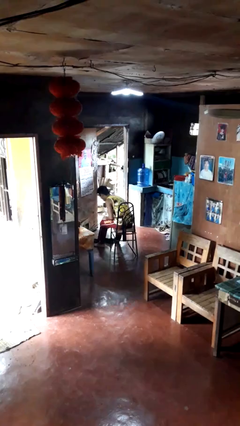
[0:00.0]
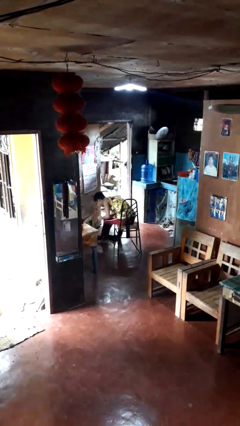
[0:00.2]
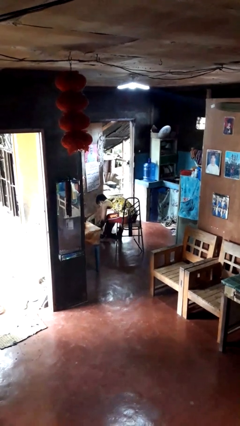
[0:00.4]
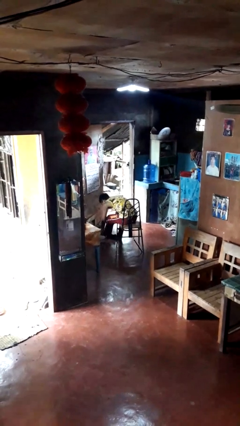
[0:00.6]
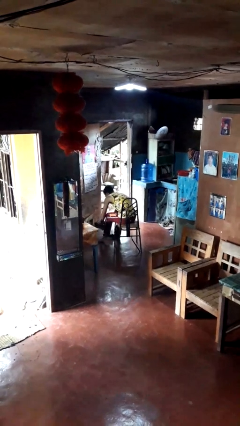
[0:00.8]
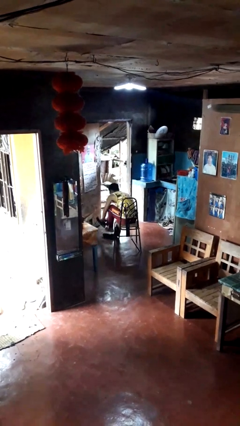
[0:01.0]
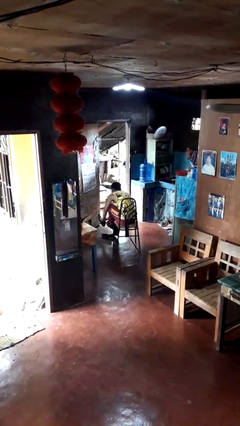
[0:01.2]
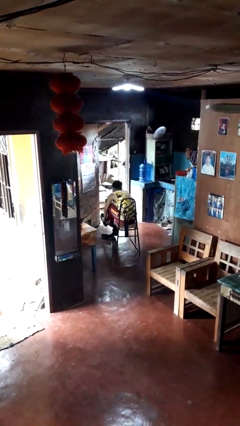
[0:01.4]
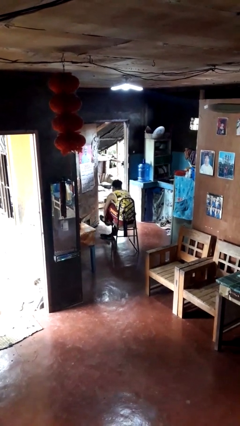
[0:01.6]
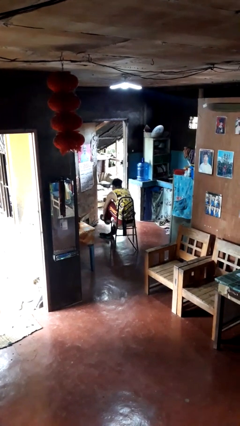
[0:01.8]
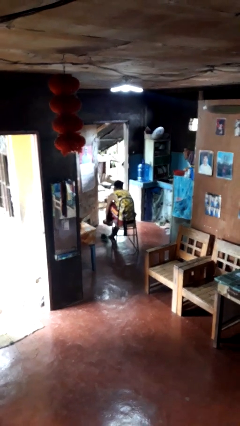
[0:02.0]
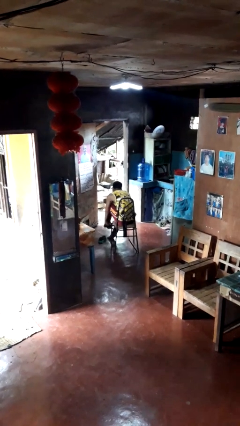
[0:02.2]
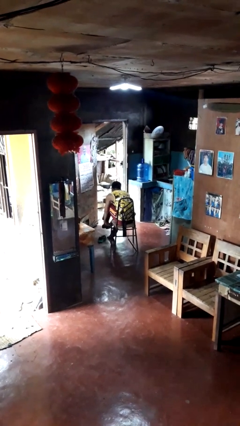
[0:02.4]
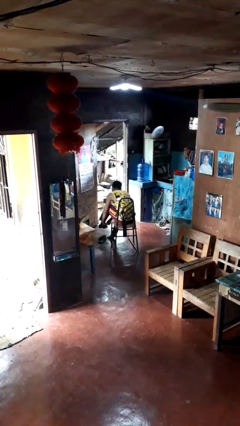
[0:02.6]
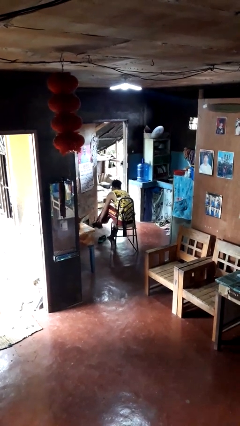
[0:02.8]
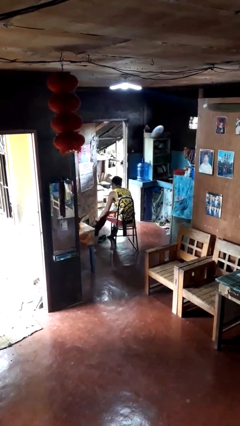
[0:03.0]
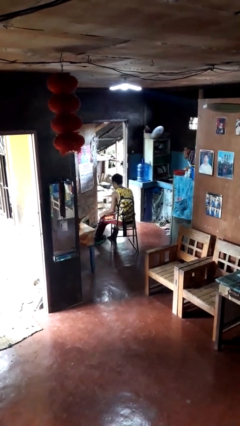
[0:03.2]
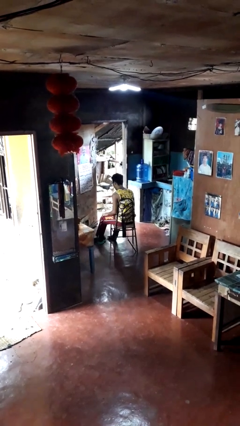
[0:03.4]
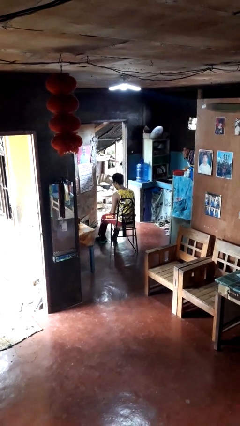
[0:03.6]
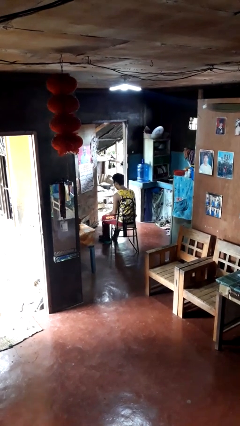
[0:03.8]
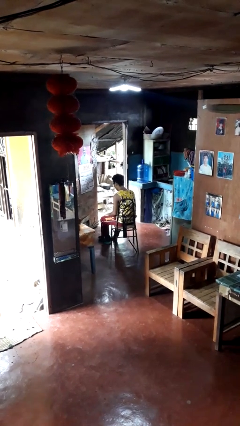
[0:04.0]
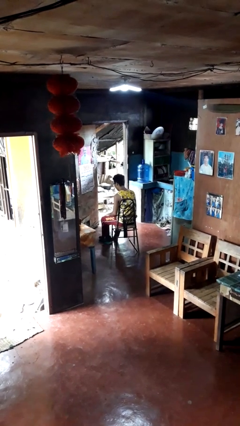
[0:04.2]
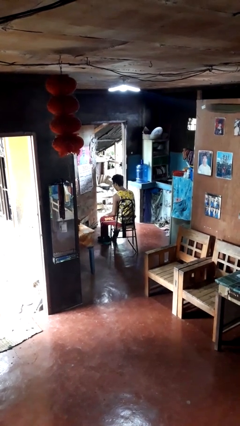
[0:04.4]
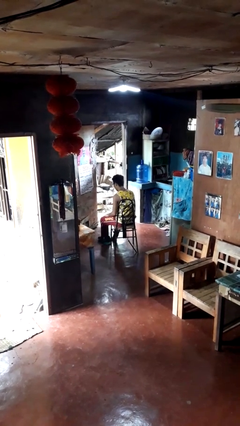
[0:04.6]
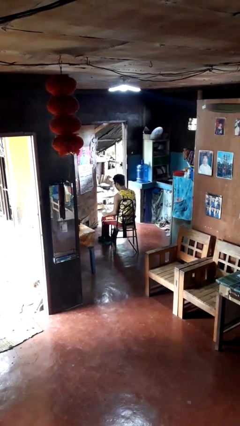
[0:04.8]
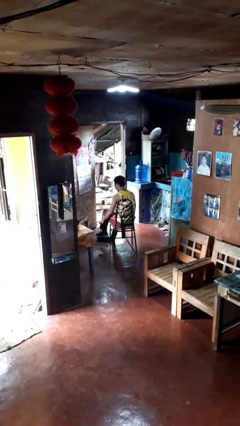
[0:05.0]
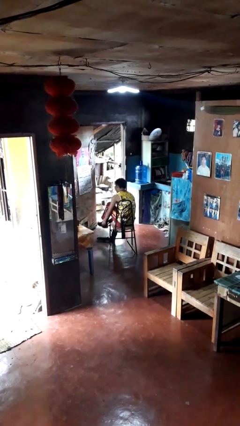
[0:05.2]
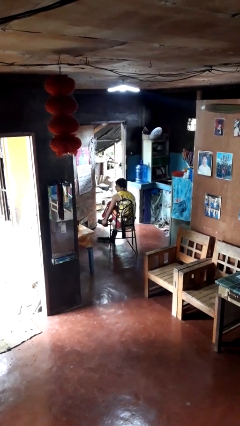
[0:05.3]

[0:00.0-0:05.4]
person puts on shoes

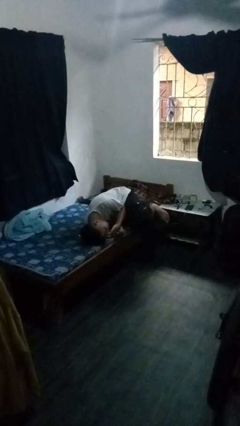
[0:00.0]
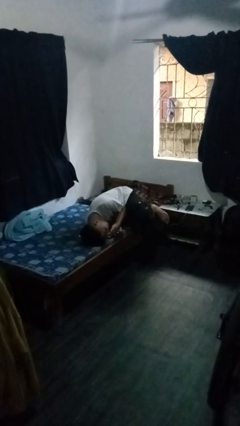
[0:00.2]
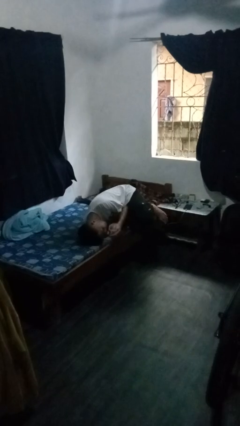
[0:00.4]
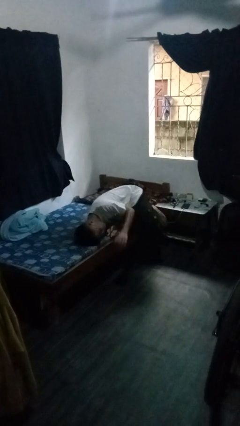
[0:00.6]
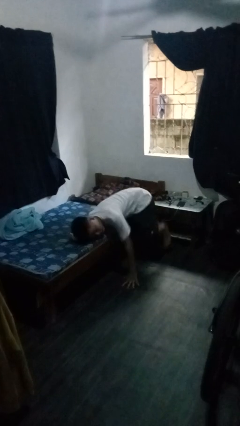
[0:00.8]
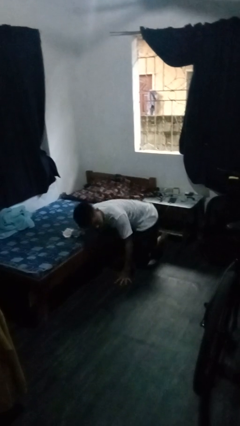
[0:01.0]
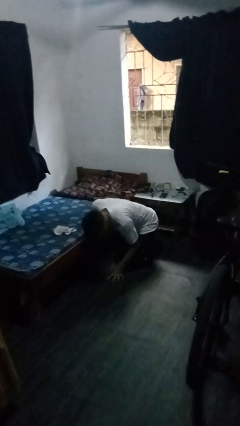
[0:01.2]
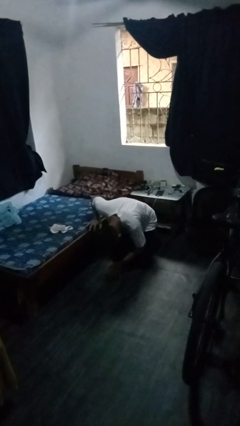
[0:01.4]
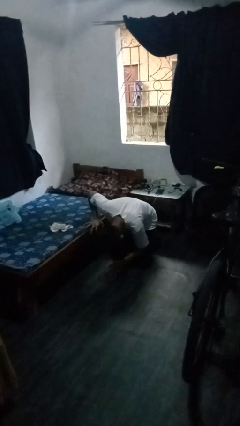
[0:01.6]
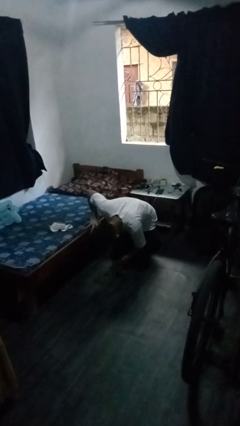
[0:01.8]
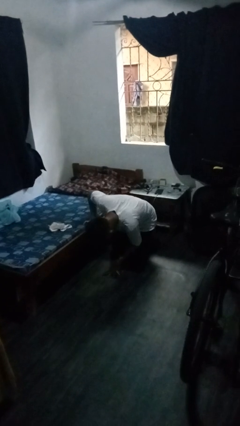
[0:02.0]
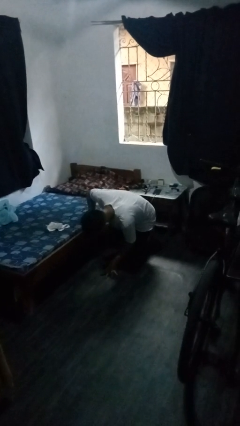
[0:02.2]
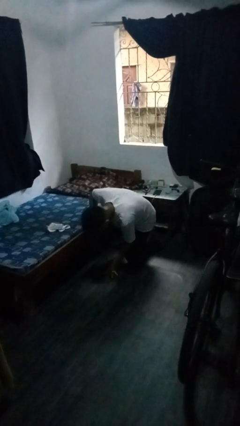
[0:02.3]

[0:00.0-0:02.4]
person falls from bed

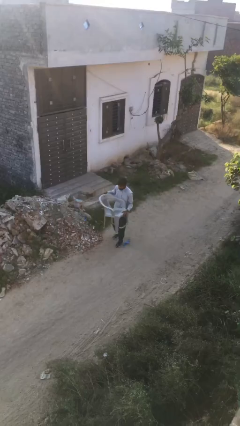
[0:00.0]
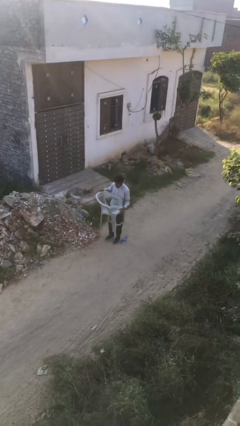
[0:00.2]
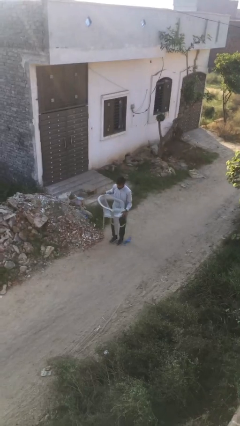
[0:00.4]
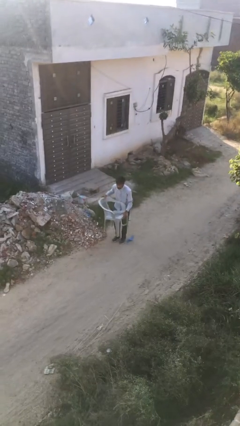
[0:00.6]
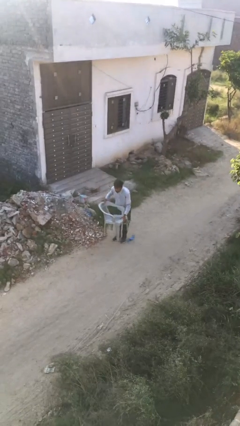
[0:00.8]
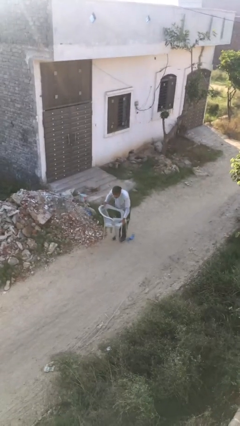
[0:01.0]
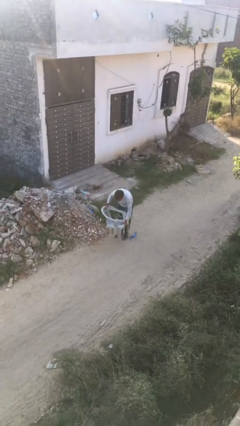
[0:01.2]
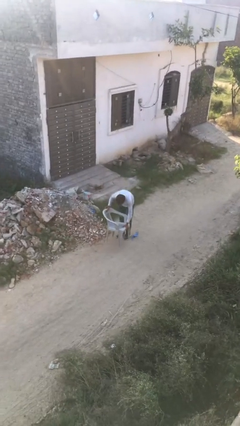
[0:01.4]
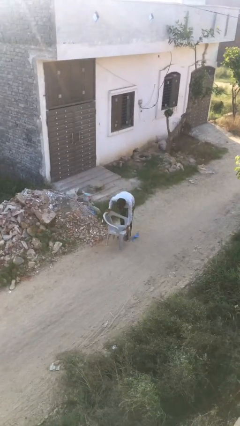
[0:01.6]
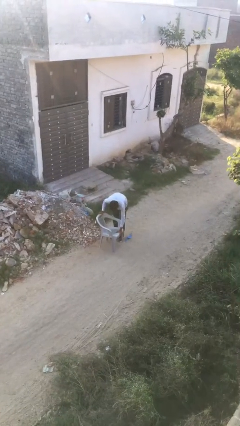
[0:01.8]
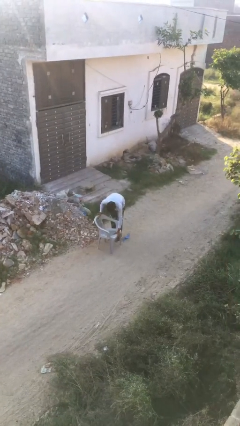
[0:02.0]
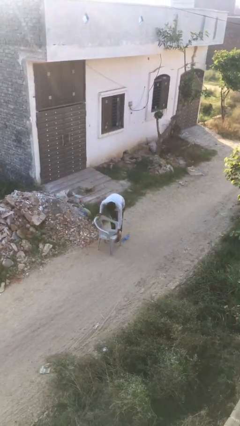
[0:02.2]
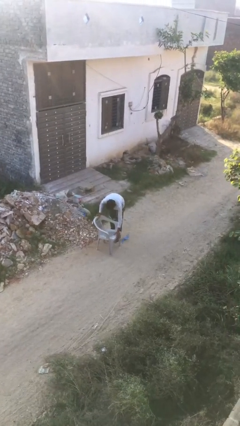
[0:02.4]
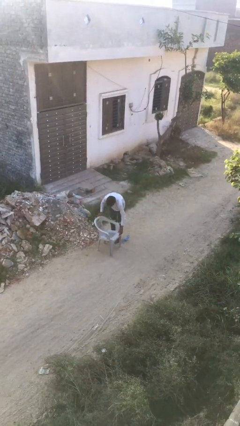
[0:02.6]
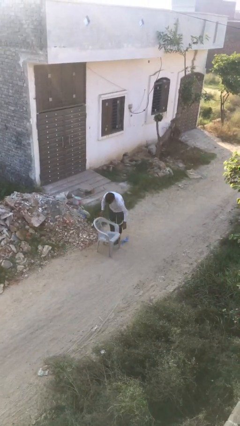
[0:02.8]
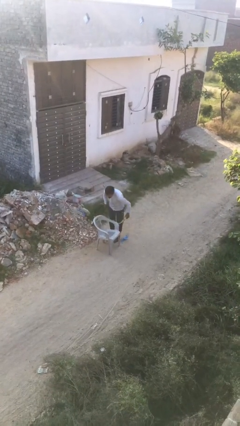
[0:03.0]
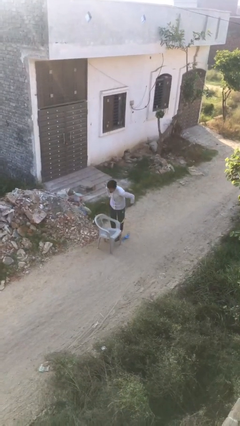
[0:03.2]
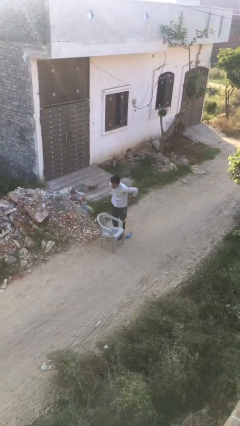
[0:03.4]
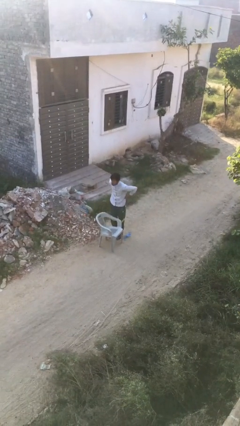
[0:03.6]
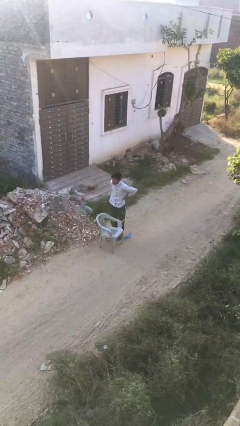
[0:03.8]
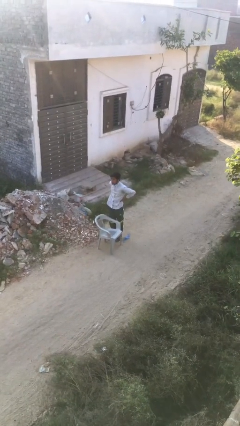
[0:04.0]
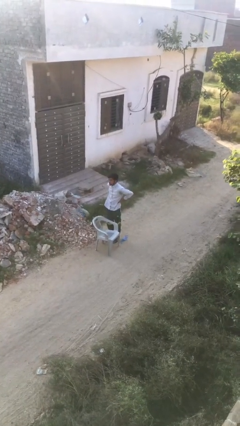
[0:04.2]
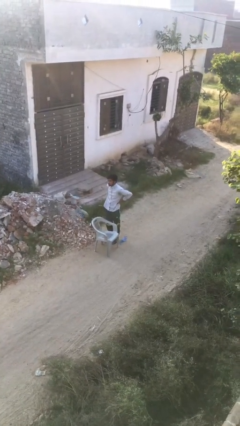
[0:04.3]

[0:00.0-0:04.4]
person puts down object on floor

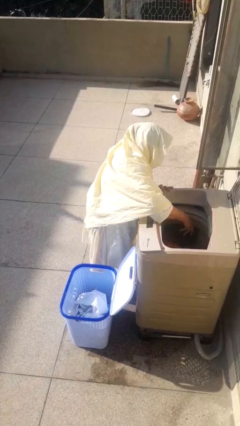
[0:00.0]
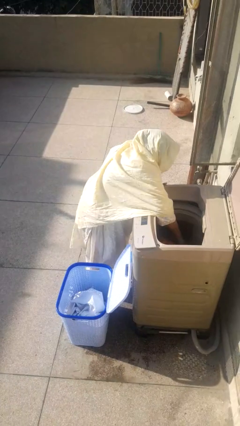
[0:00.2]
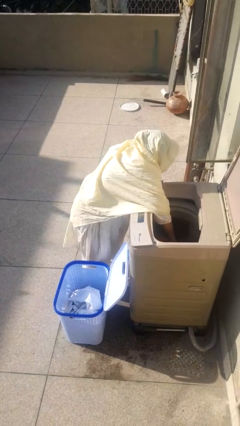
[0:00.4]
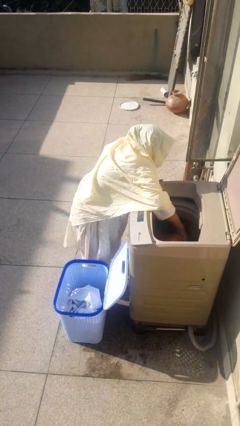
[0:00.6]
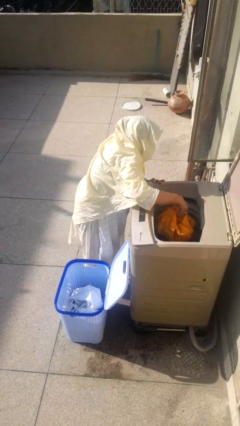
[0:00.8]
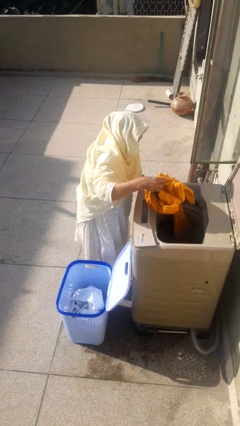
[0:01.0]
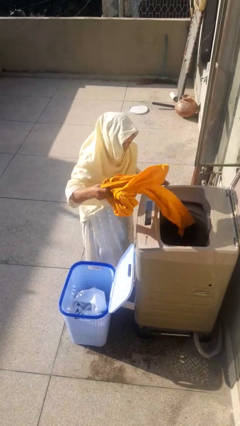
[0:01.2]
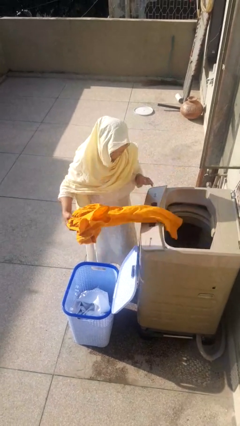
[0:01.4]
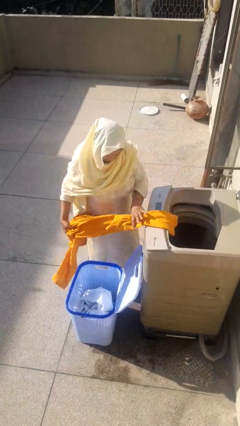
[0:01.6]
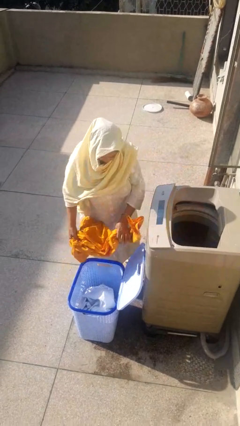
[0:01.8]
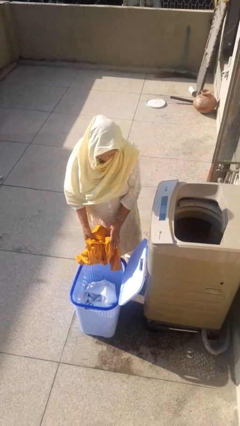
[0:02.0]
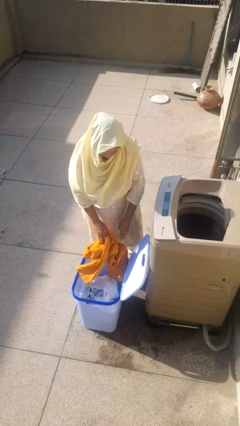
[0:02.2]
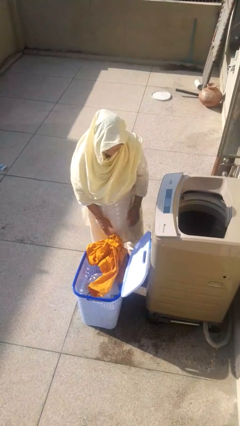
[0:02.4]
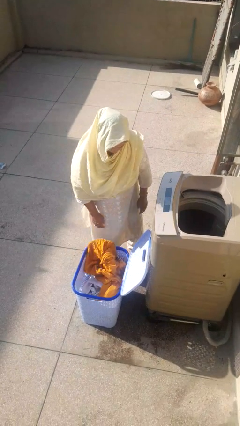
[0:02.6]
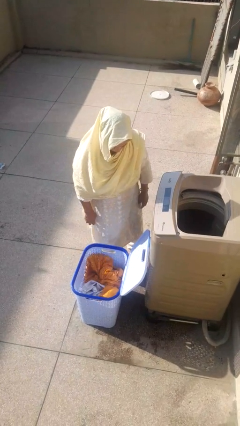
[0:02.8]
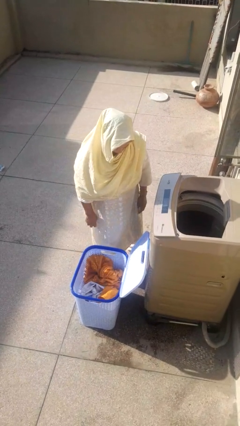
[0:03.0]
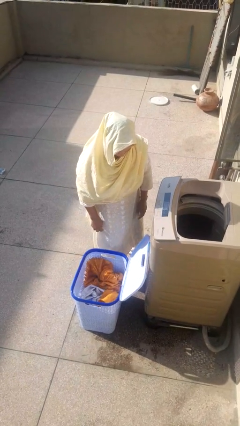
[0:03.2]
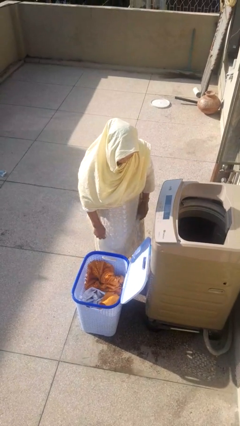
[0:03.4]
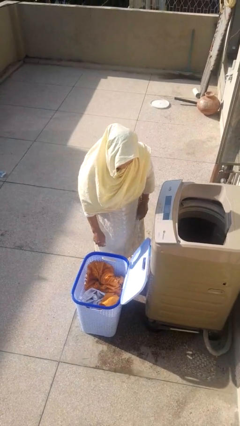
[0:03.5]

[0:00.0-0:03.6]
person unloads clotheswasher

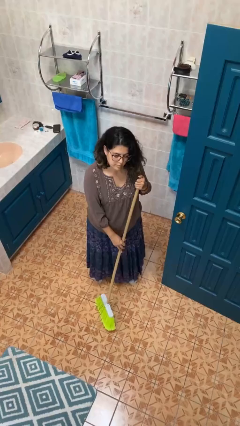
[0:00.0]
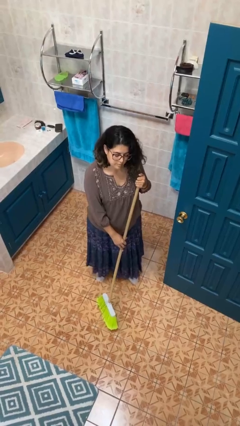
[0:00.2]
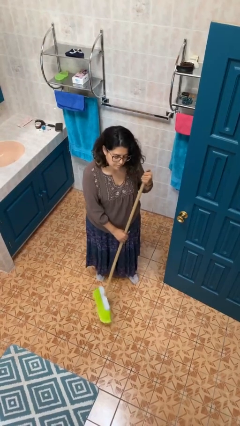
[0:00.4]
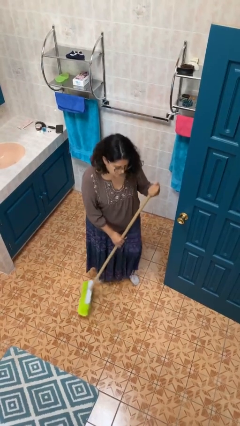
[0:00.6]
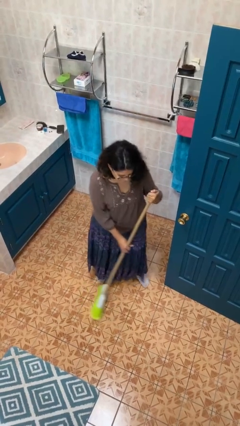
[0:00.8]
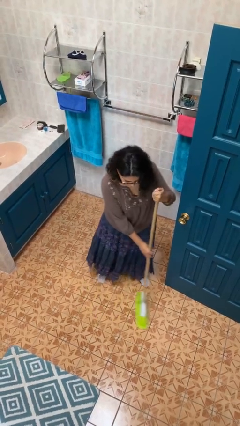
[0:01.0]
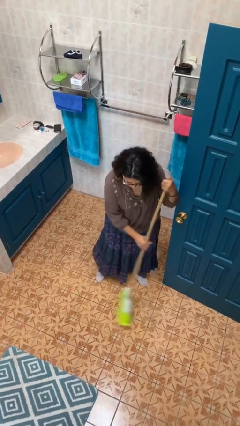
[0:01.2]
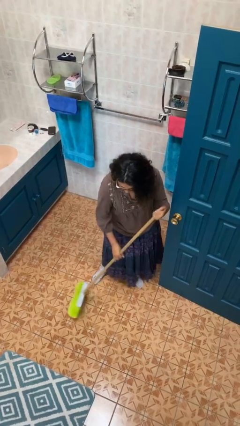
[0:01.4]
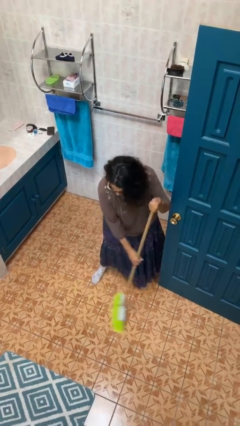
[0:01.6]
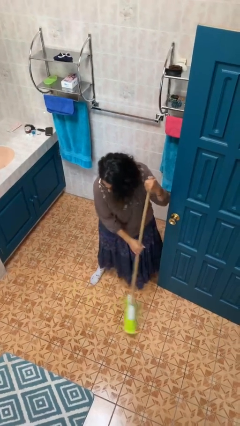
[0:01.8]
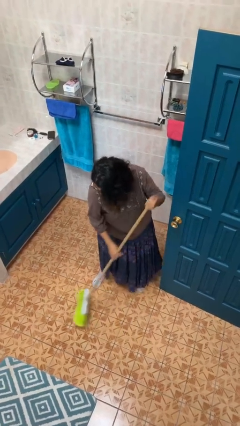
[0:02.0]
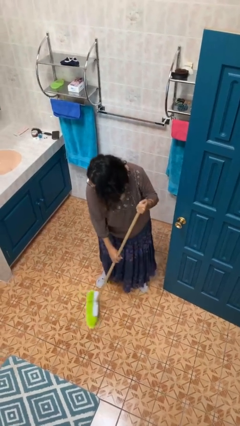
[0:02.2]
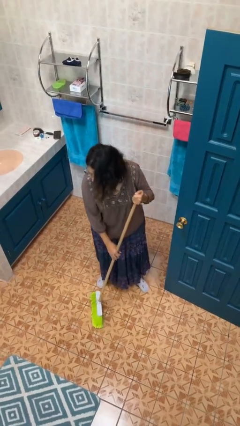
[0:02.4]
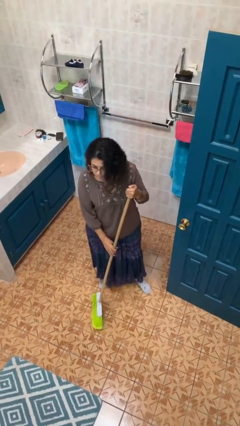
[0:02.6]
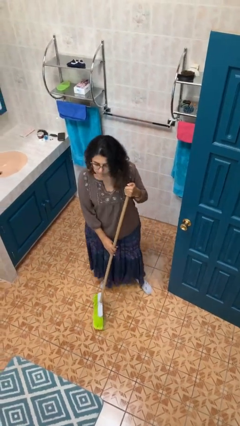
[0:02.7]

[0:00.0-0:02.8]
person sweeps floor
